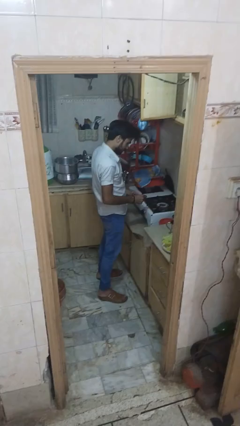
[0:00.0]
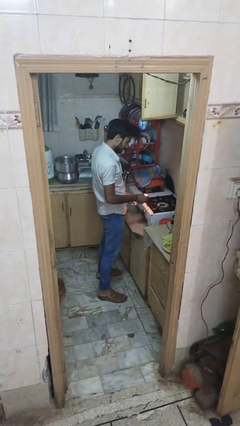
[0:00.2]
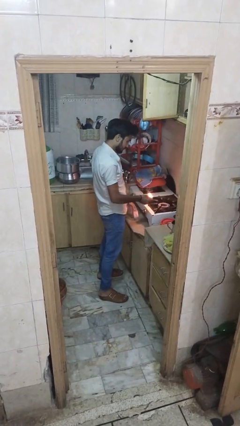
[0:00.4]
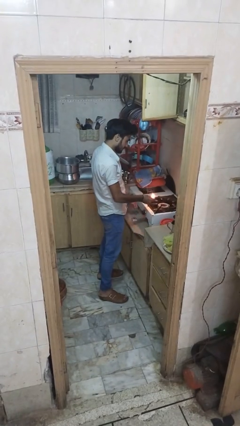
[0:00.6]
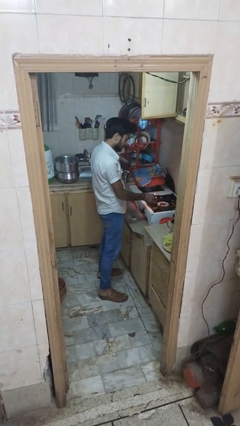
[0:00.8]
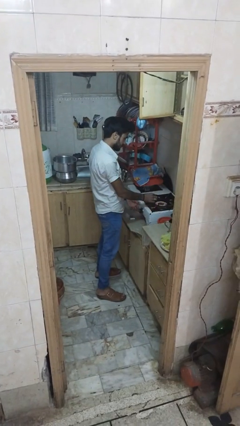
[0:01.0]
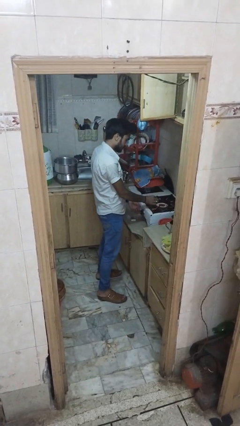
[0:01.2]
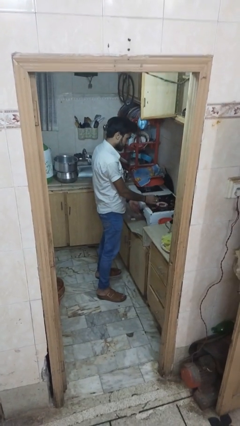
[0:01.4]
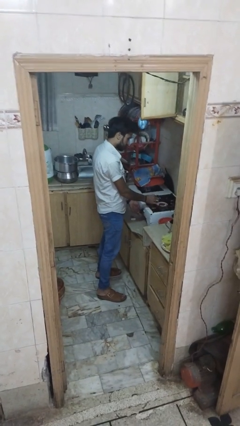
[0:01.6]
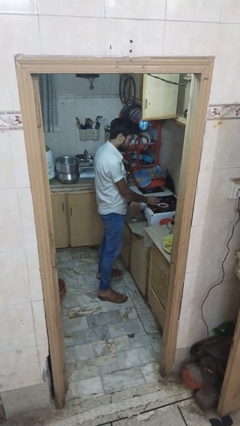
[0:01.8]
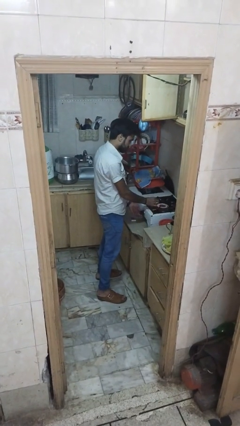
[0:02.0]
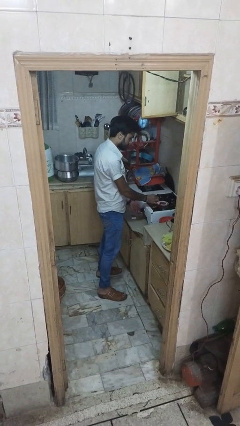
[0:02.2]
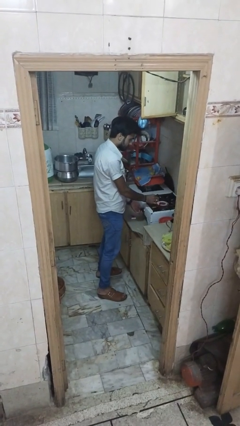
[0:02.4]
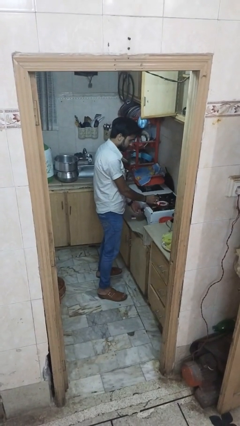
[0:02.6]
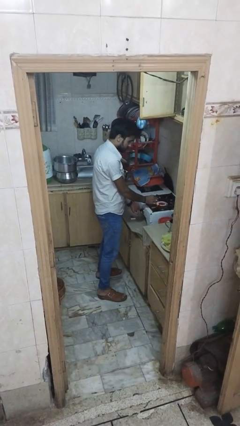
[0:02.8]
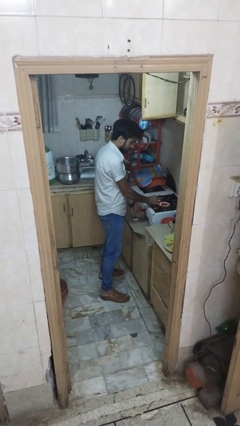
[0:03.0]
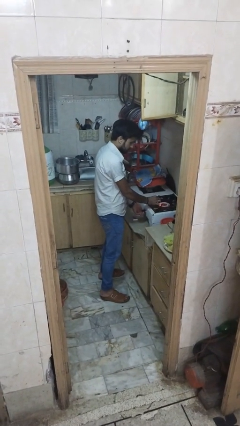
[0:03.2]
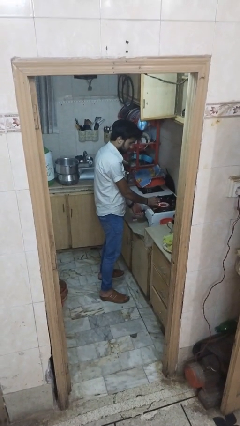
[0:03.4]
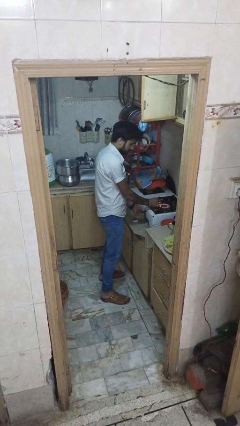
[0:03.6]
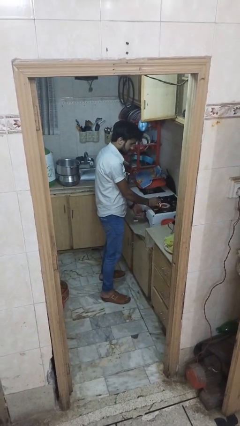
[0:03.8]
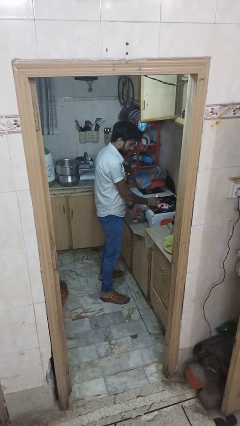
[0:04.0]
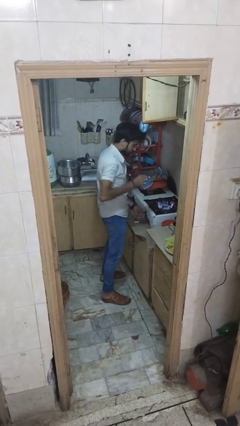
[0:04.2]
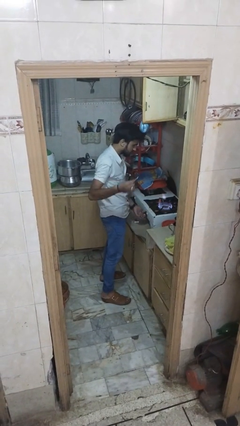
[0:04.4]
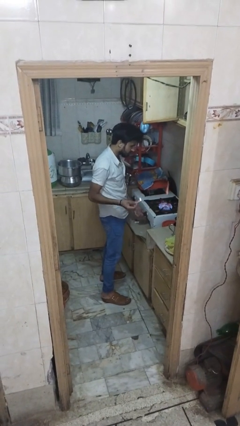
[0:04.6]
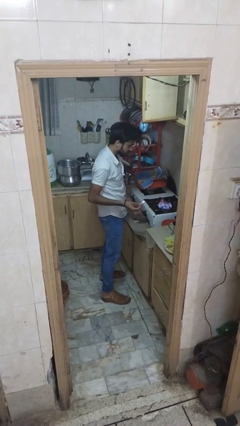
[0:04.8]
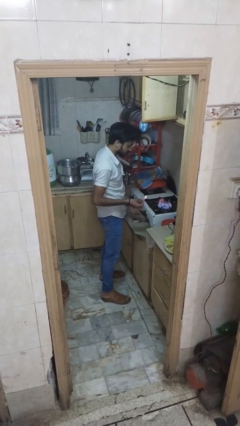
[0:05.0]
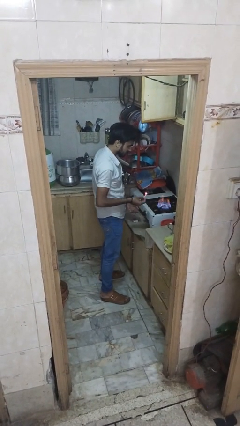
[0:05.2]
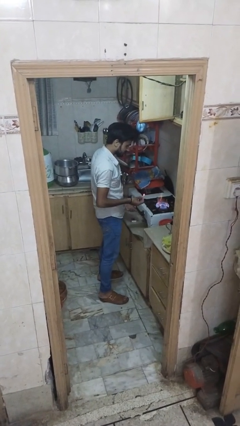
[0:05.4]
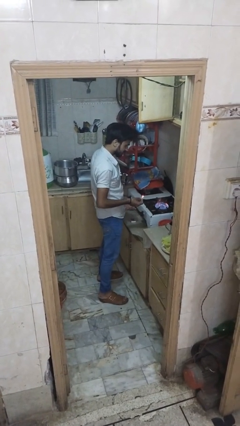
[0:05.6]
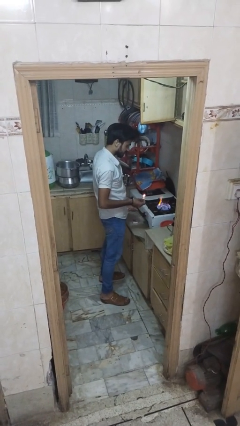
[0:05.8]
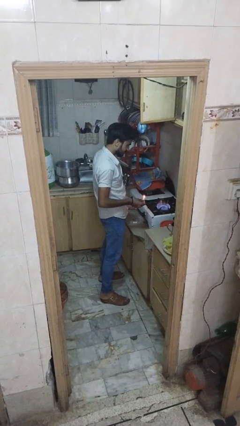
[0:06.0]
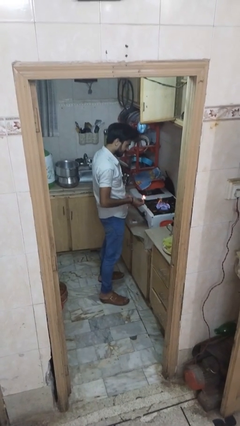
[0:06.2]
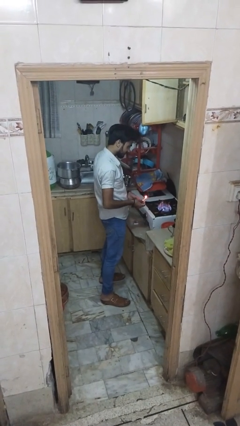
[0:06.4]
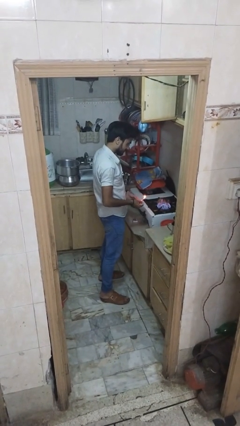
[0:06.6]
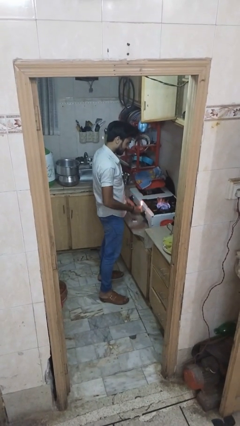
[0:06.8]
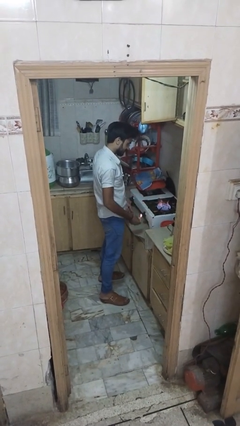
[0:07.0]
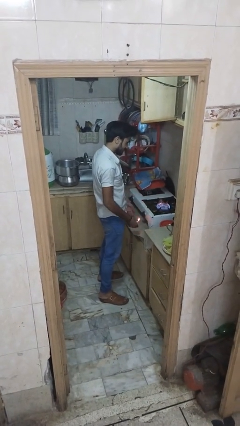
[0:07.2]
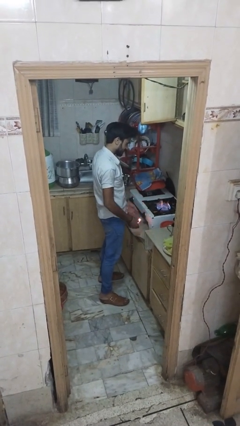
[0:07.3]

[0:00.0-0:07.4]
person turns on stovetop

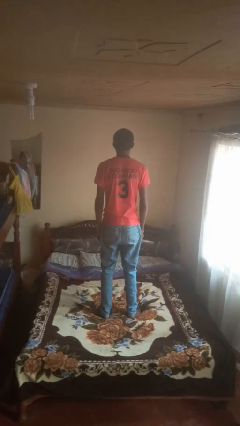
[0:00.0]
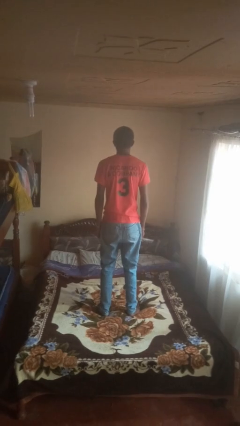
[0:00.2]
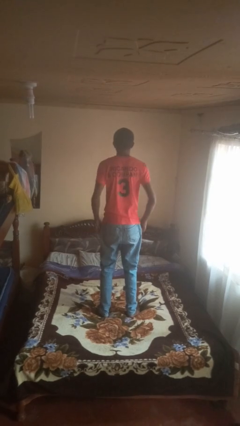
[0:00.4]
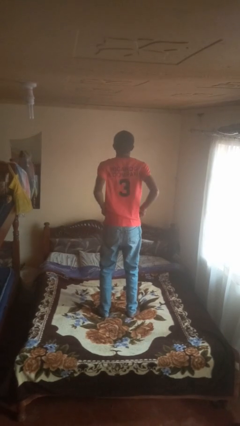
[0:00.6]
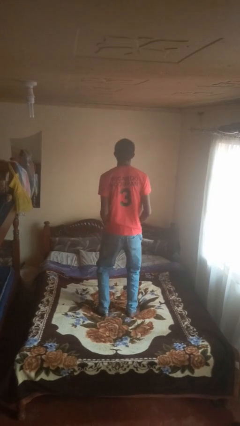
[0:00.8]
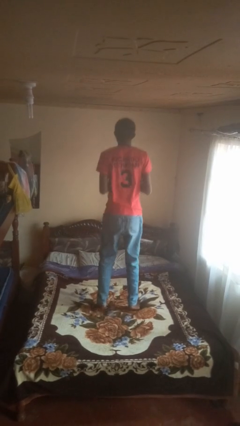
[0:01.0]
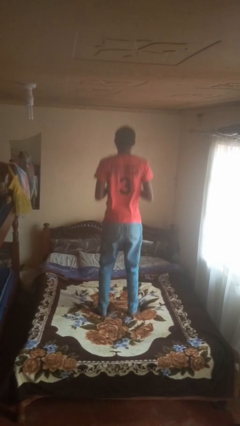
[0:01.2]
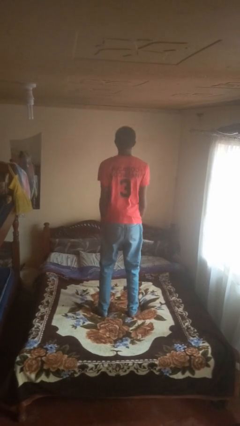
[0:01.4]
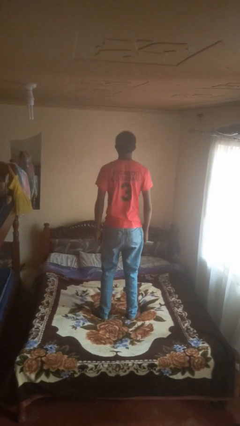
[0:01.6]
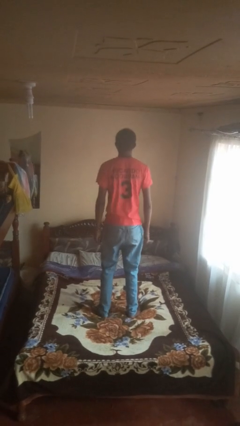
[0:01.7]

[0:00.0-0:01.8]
person jumps on bed

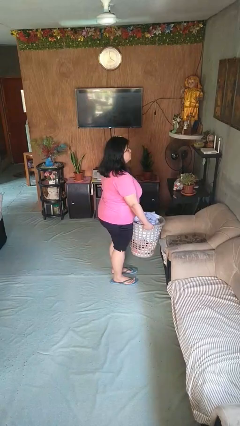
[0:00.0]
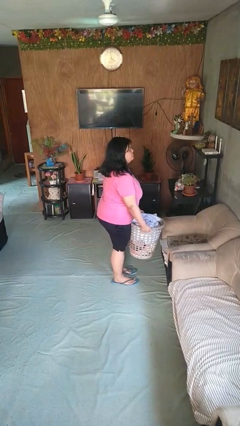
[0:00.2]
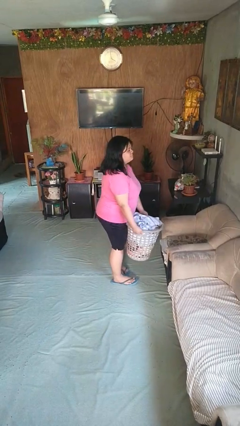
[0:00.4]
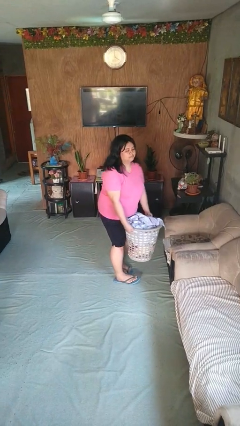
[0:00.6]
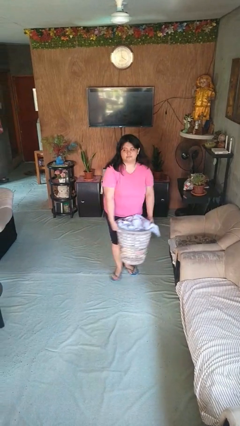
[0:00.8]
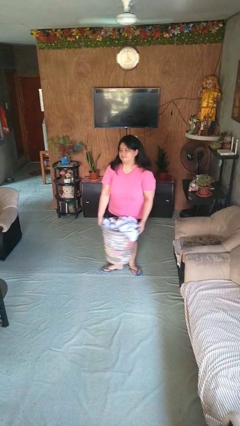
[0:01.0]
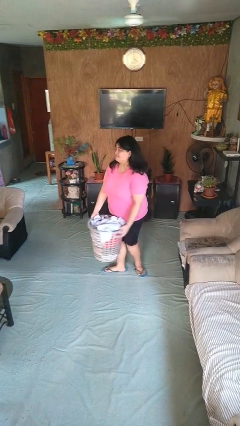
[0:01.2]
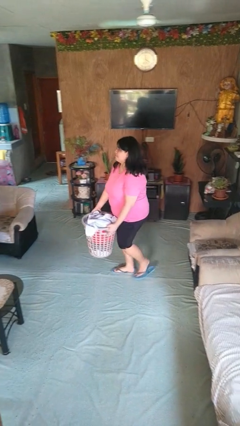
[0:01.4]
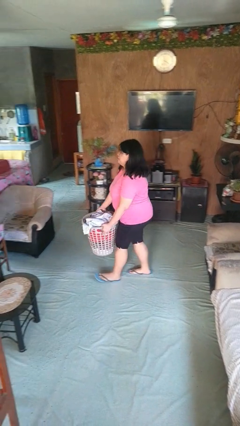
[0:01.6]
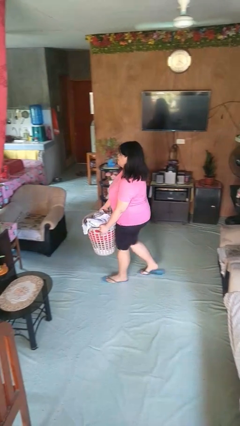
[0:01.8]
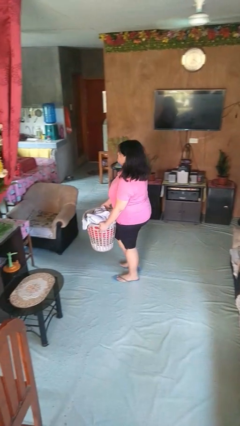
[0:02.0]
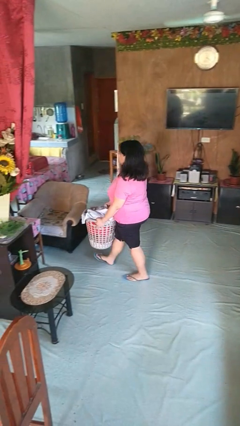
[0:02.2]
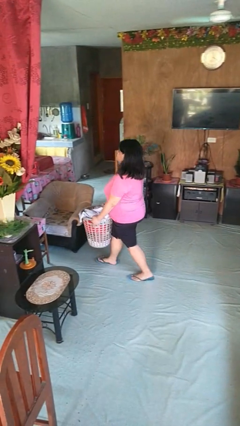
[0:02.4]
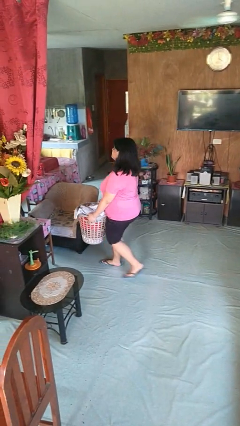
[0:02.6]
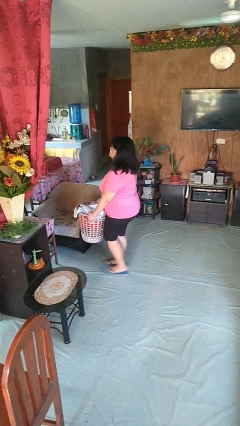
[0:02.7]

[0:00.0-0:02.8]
person carries laundry basket

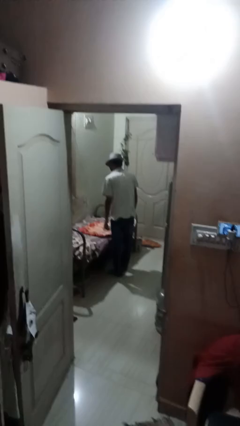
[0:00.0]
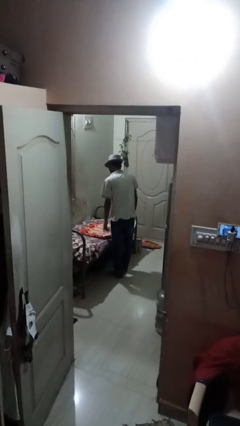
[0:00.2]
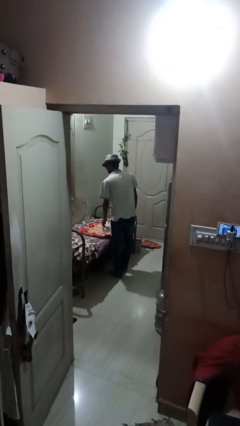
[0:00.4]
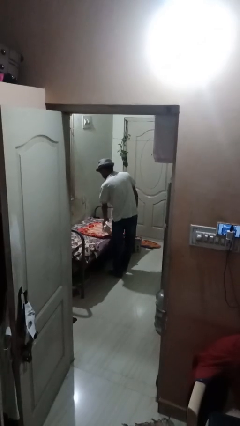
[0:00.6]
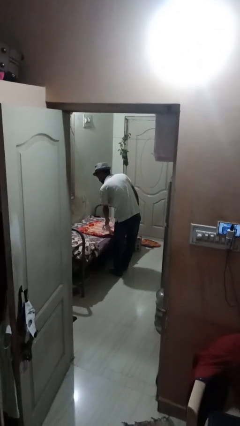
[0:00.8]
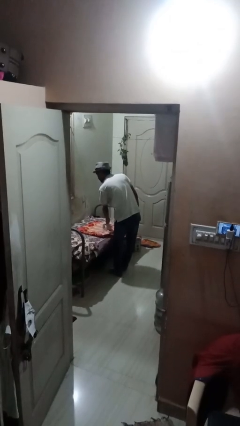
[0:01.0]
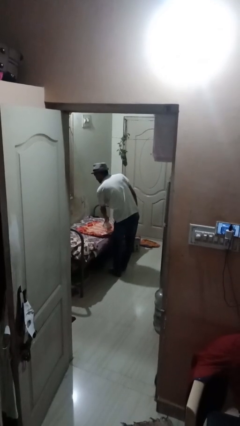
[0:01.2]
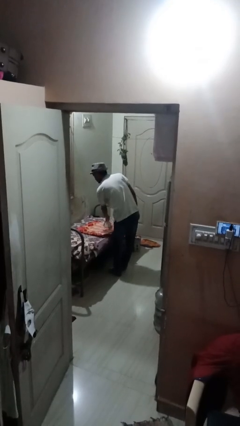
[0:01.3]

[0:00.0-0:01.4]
person irons clothes

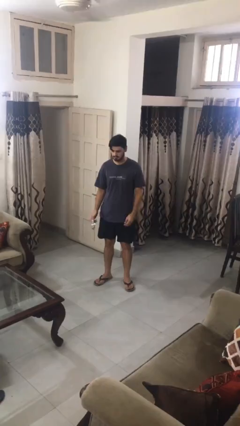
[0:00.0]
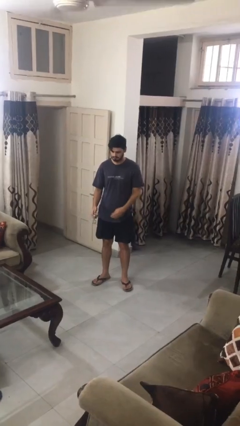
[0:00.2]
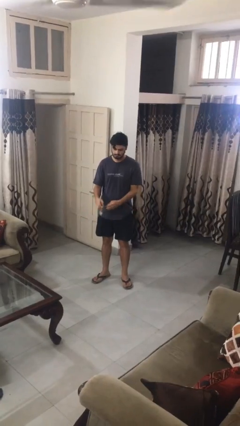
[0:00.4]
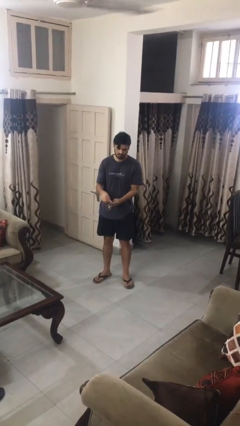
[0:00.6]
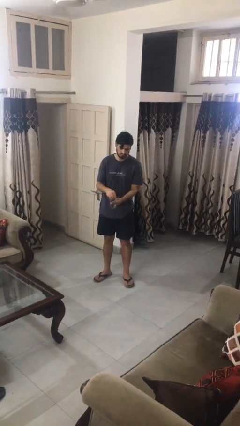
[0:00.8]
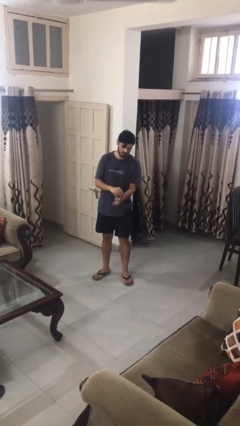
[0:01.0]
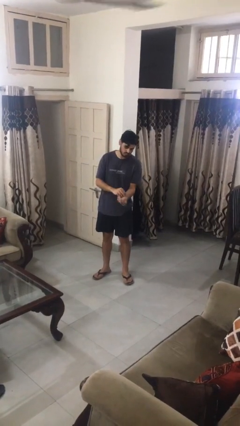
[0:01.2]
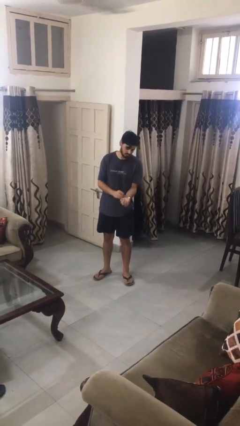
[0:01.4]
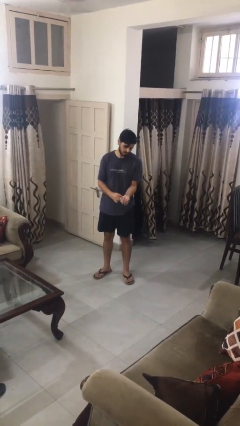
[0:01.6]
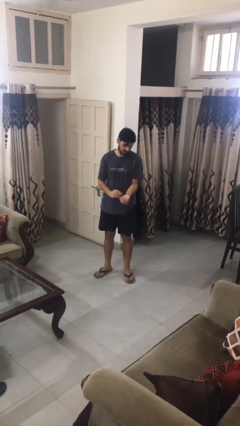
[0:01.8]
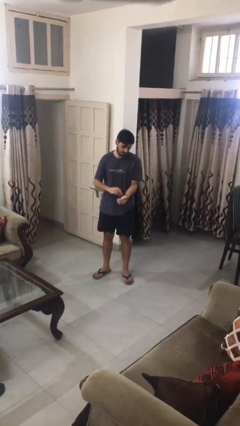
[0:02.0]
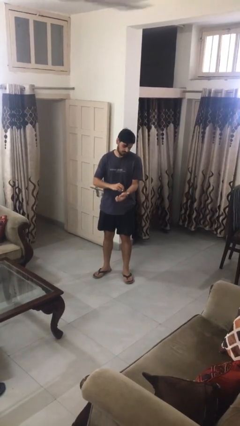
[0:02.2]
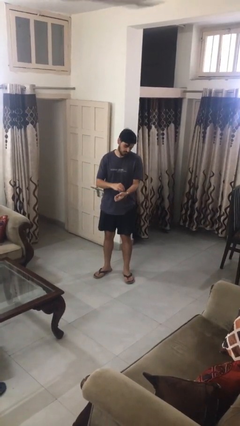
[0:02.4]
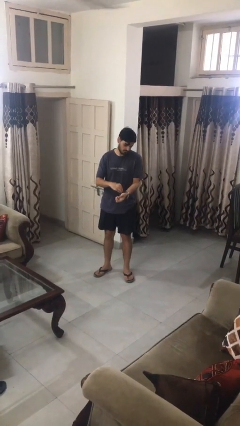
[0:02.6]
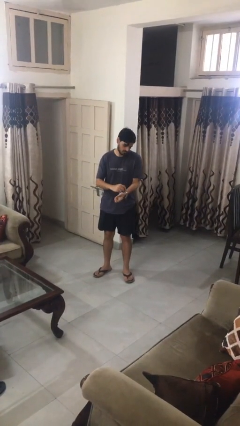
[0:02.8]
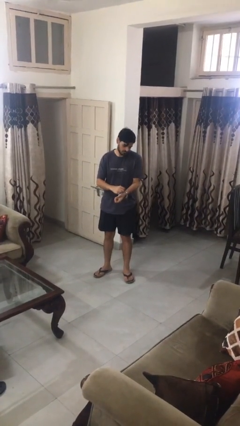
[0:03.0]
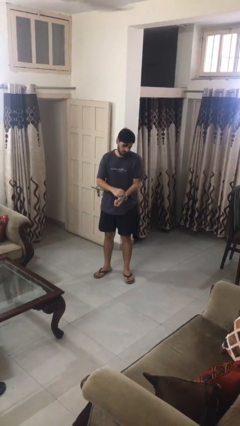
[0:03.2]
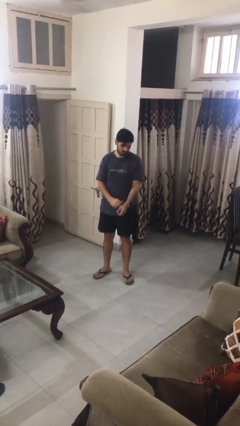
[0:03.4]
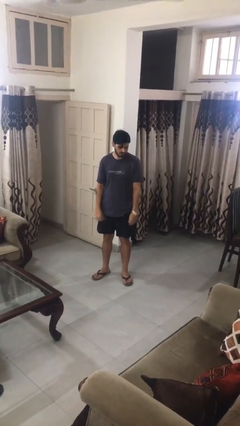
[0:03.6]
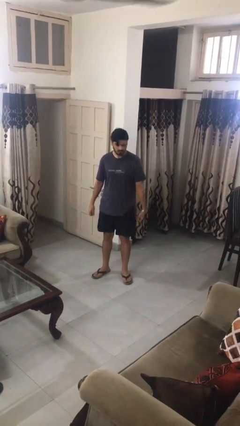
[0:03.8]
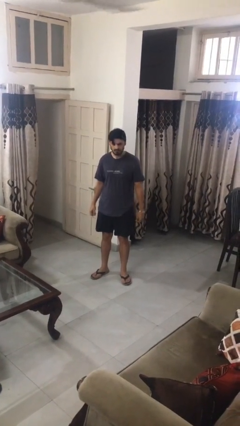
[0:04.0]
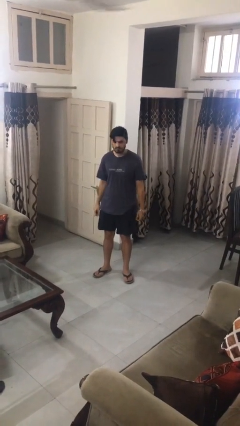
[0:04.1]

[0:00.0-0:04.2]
person puts on wristwatch
